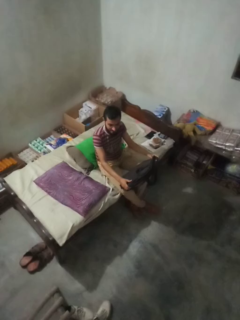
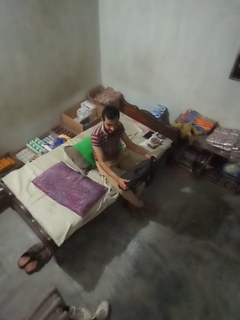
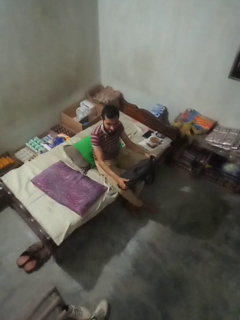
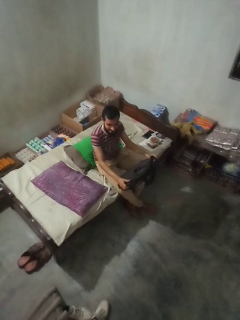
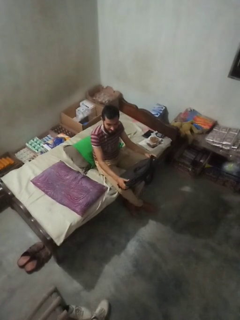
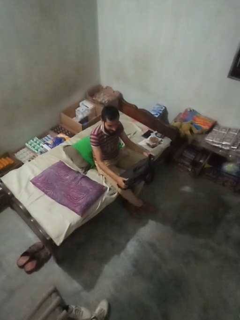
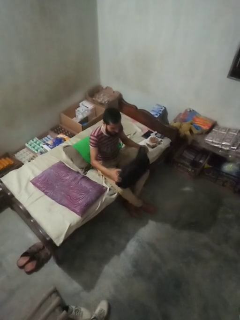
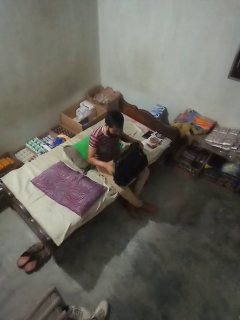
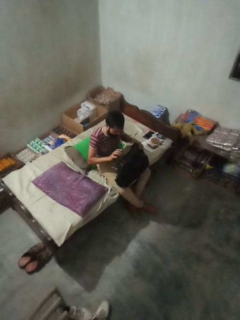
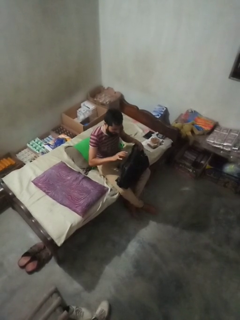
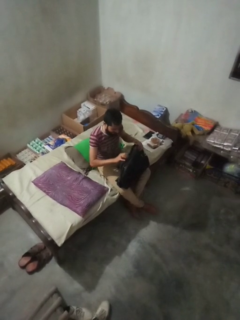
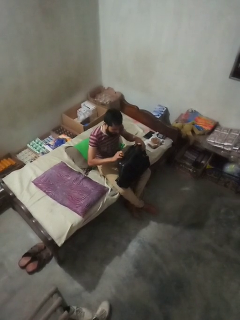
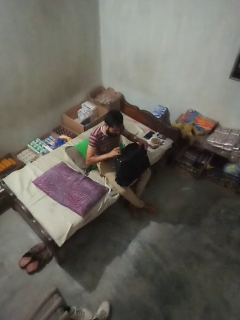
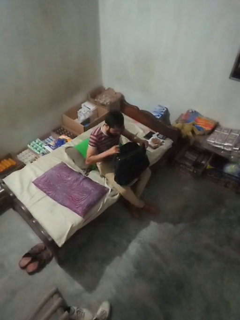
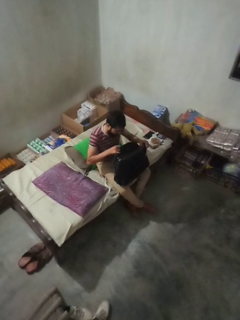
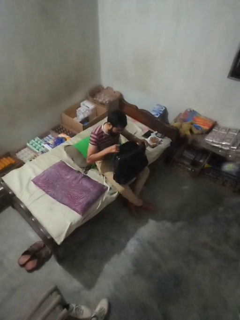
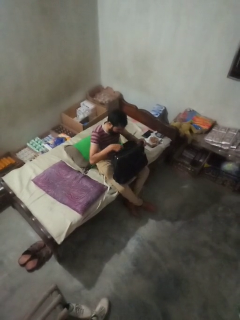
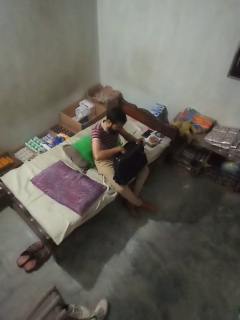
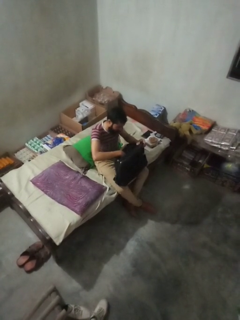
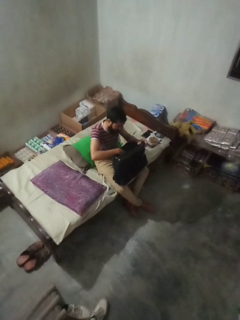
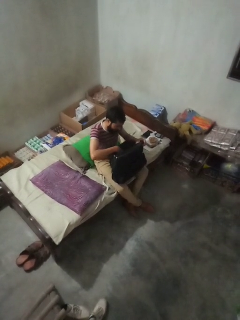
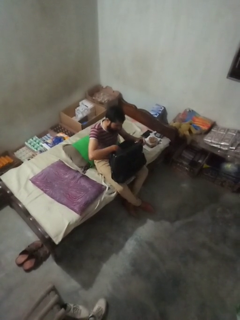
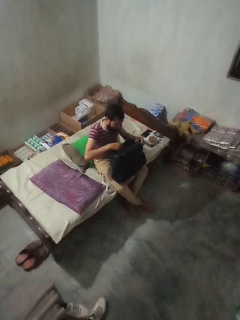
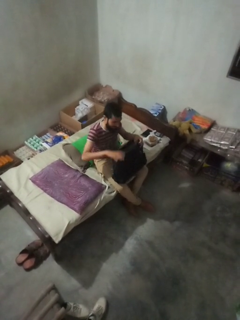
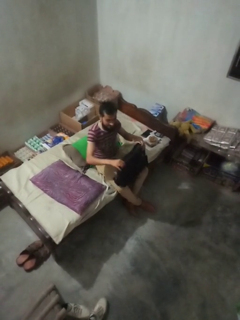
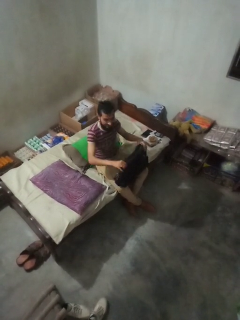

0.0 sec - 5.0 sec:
person searches in bag

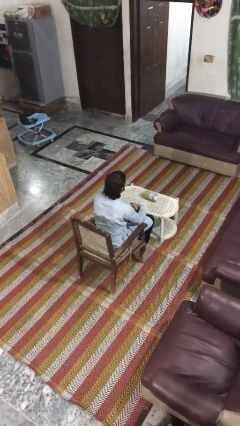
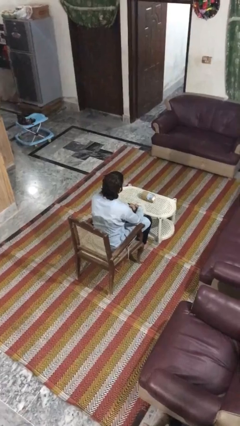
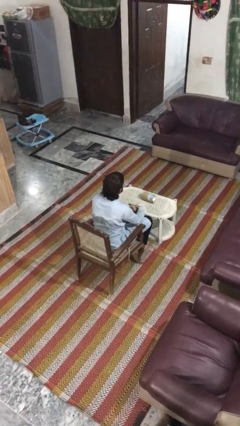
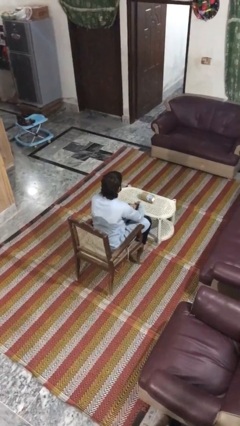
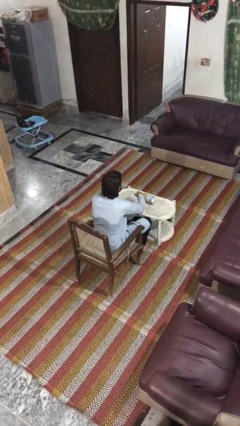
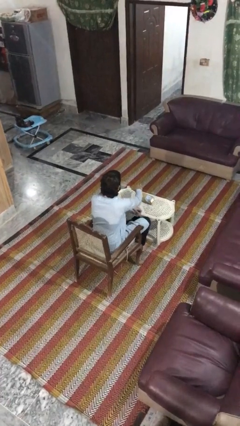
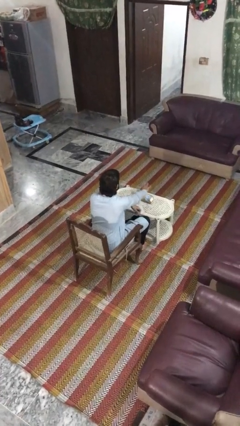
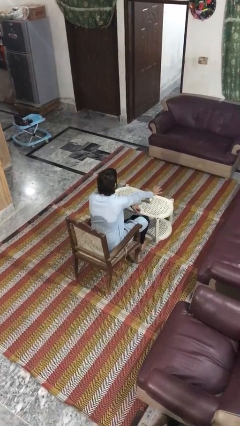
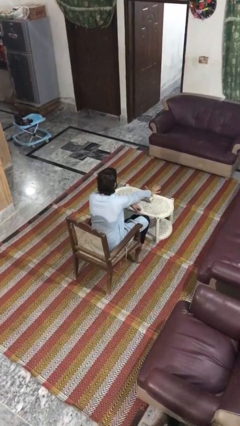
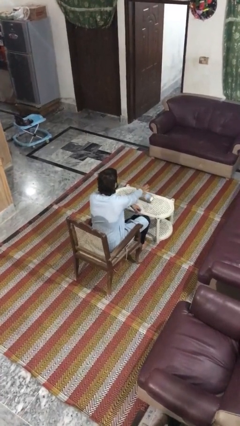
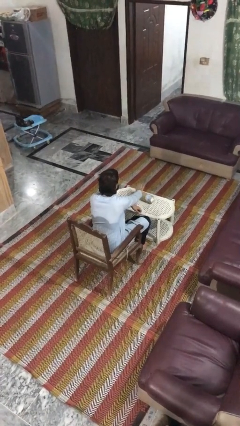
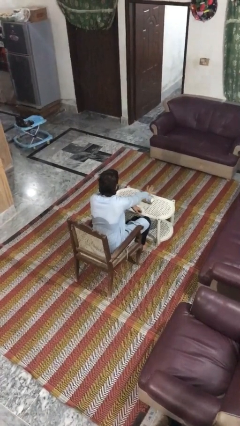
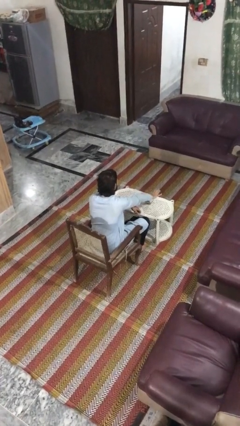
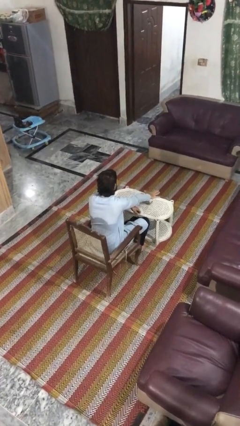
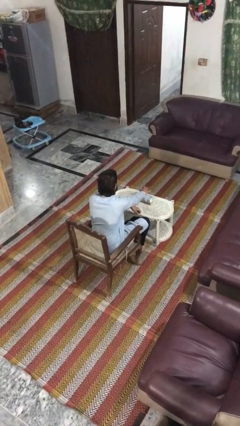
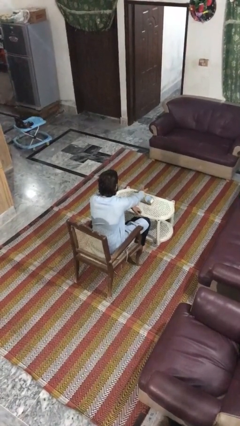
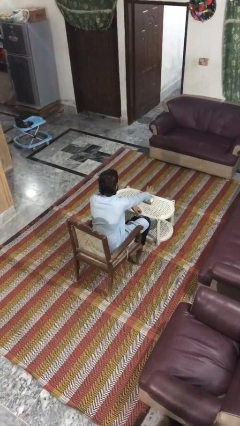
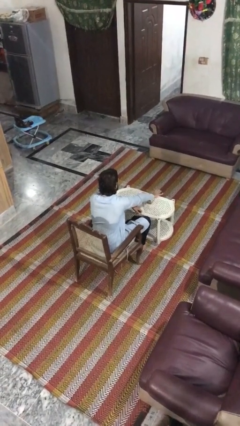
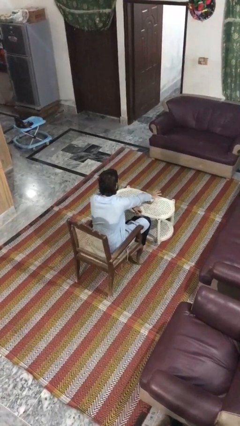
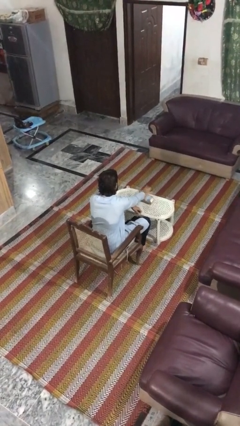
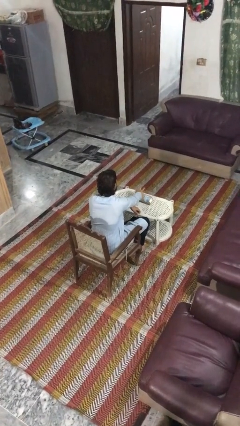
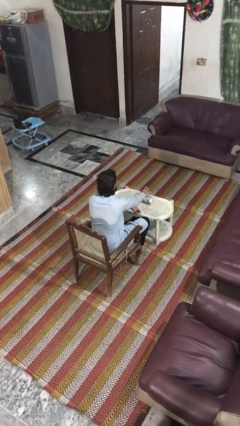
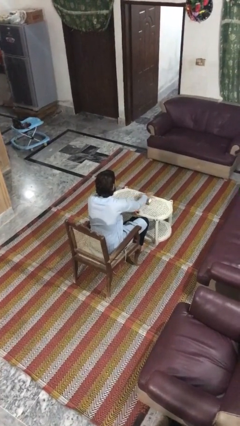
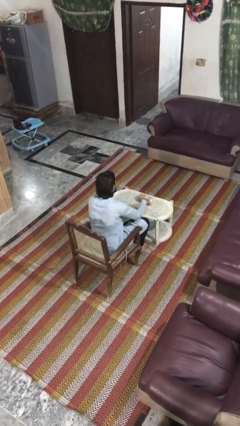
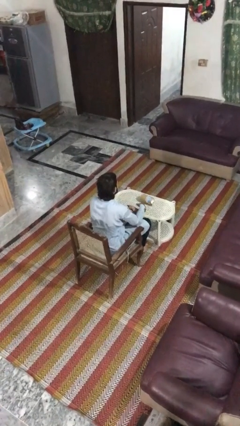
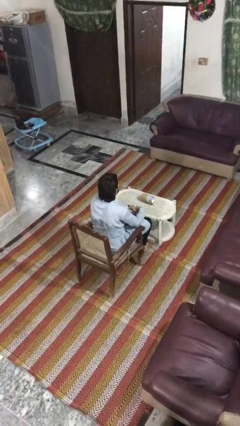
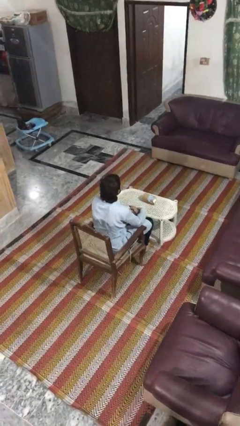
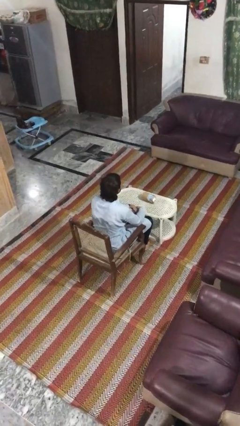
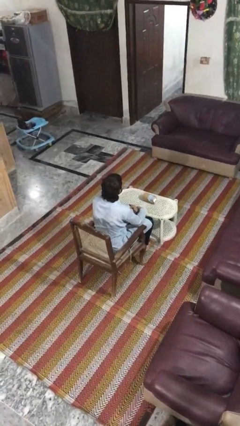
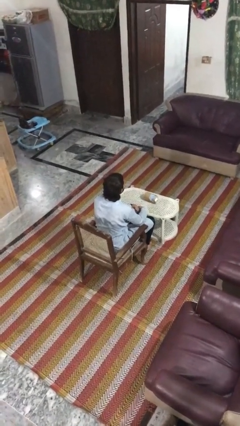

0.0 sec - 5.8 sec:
person waves hand over object

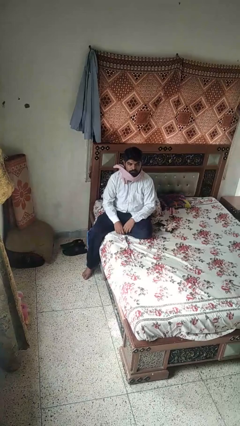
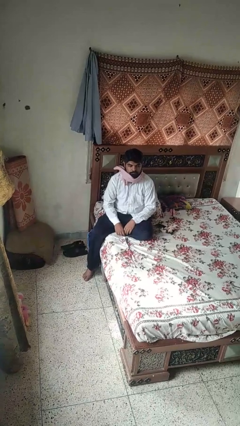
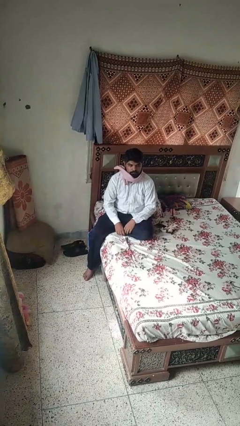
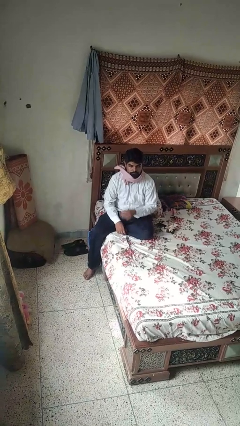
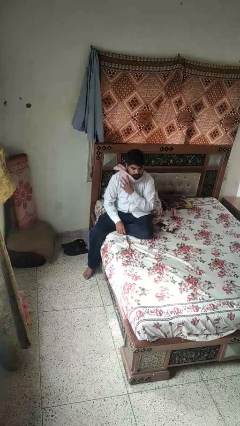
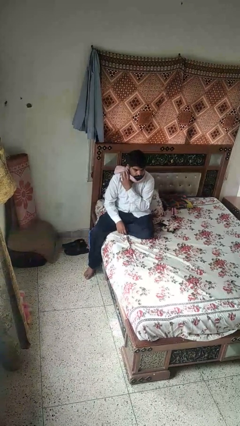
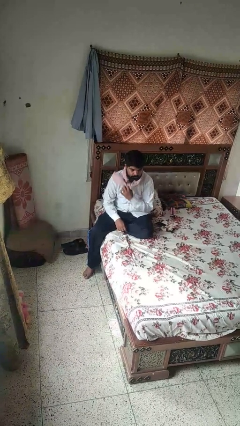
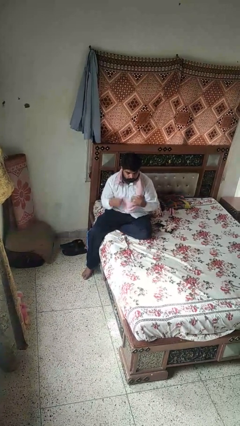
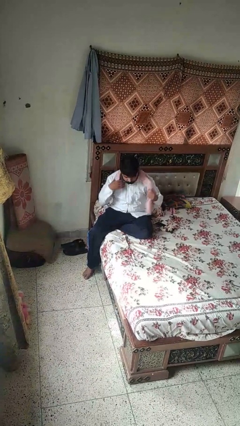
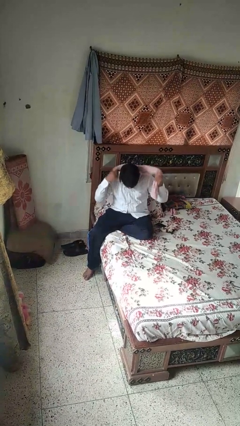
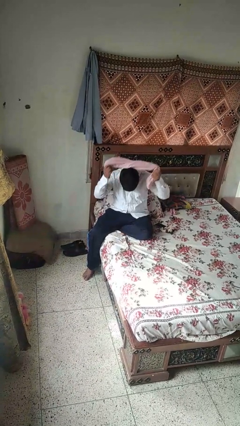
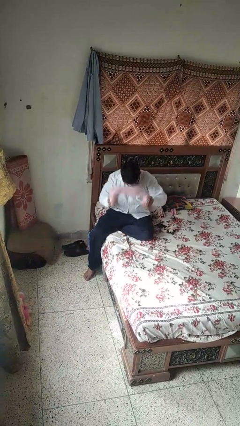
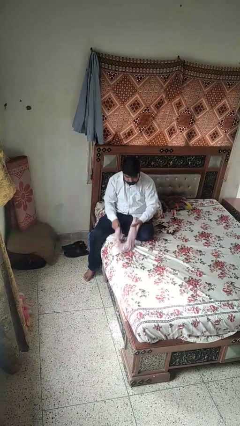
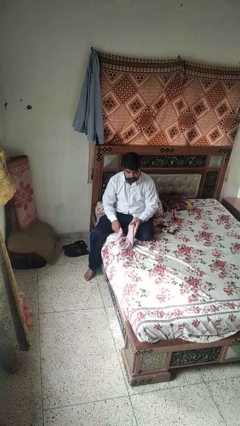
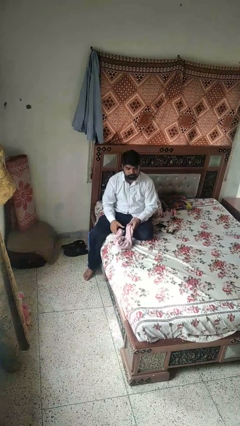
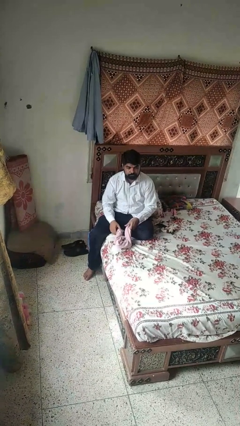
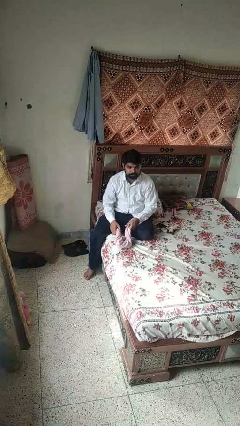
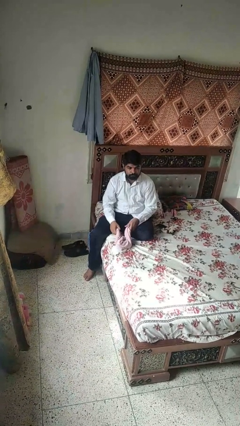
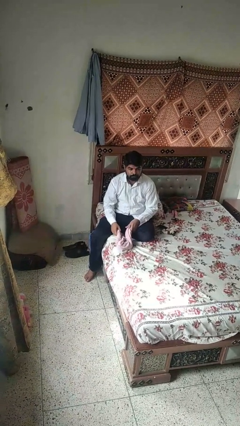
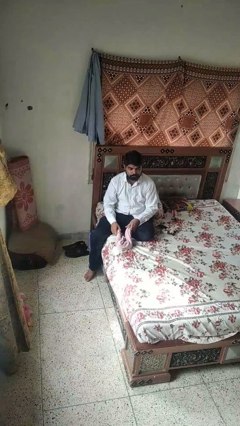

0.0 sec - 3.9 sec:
person takes off scarf

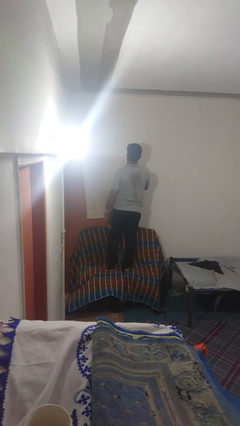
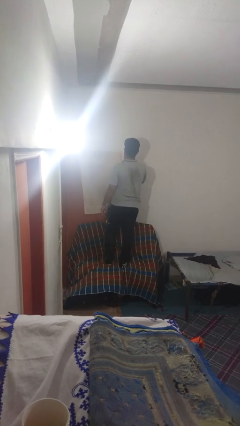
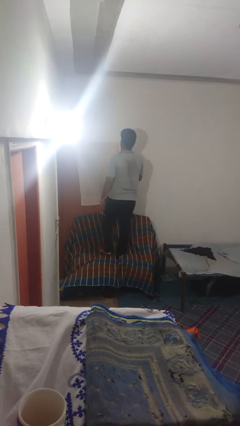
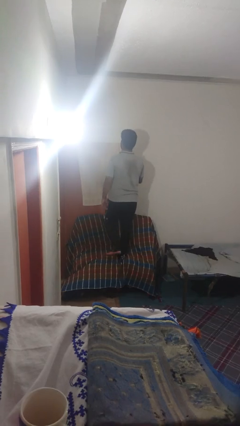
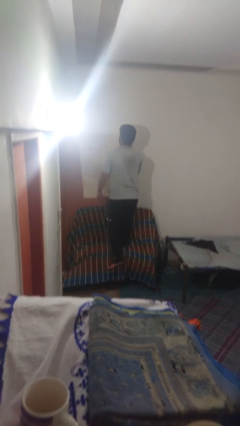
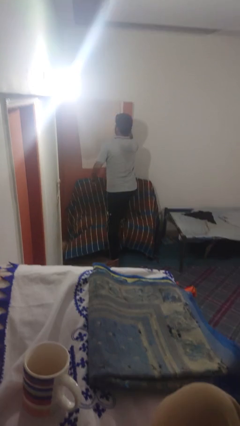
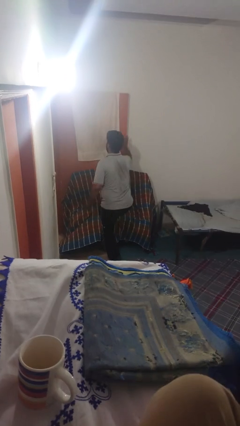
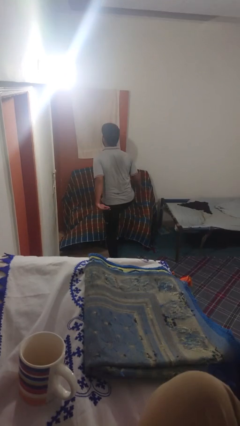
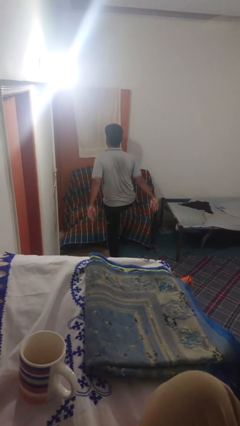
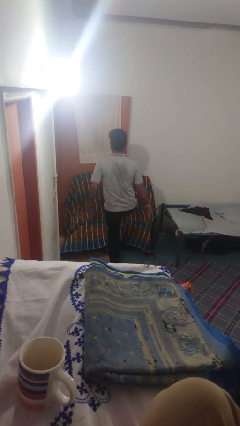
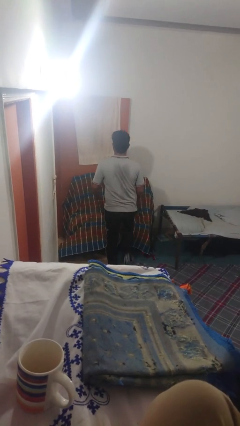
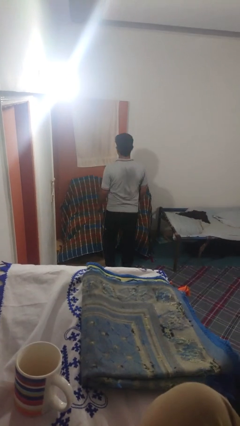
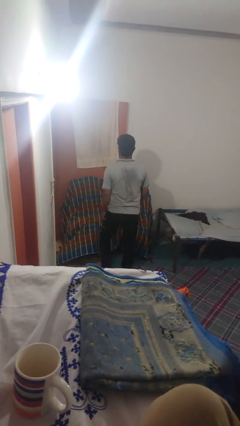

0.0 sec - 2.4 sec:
person climbs off couch

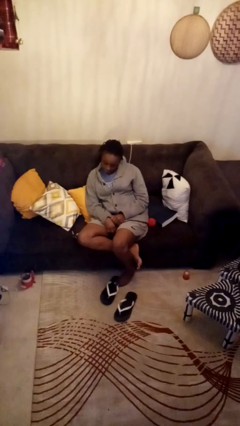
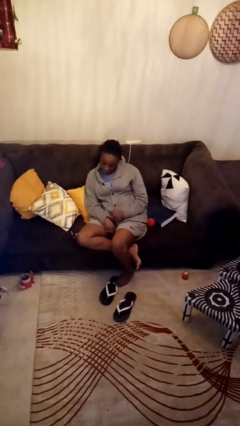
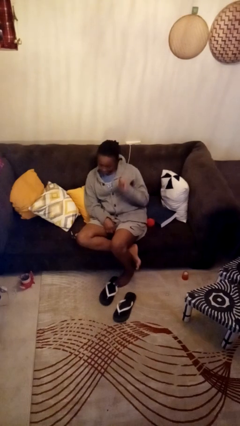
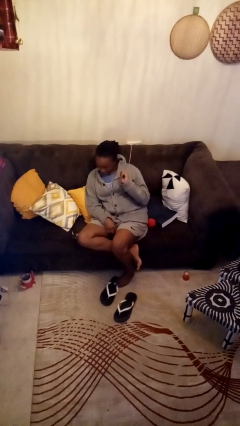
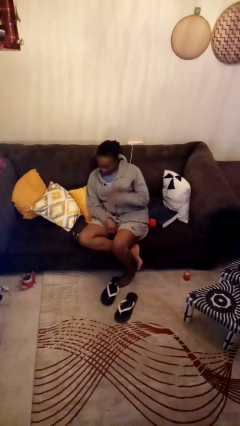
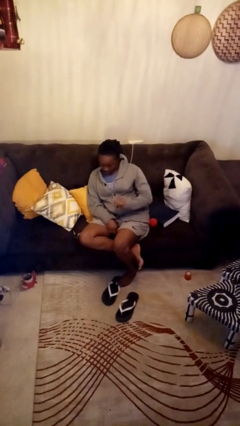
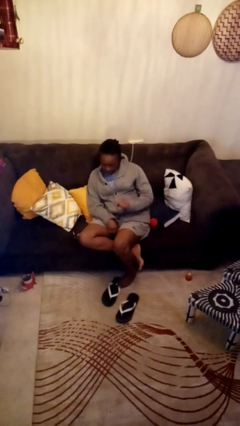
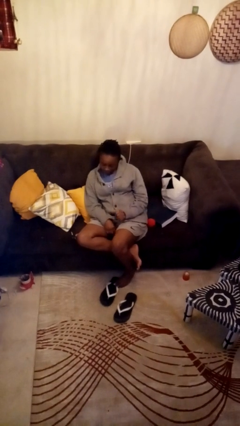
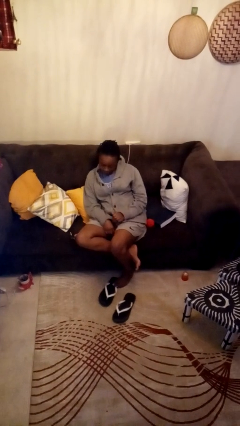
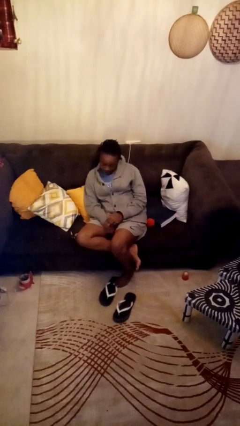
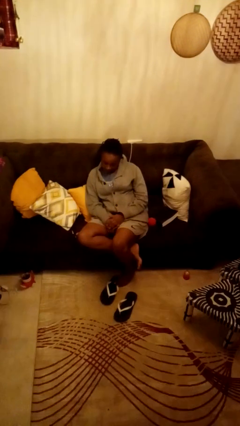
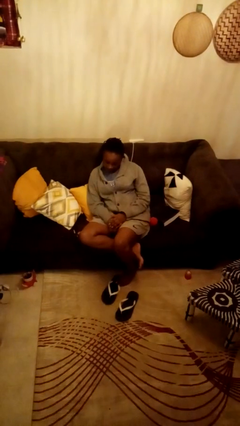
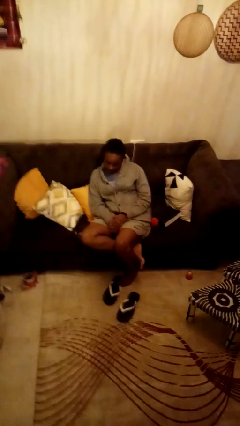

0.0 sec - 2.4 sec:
person swats bug
